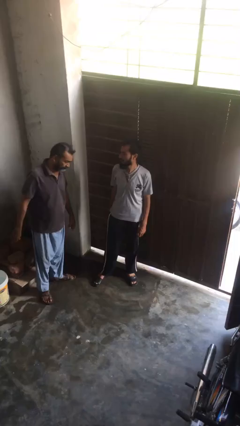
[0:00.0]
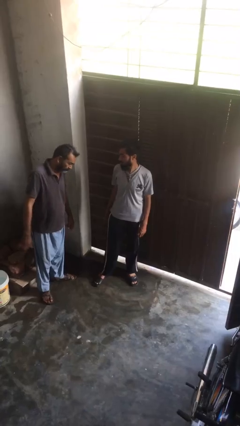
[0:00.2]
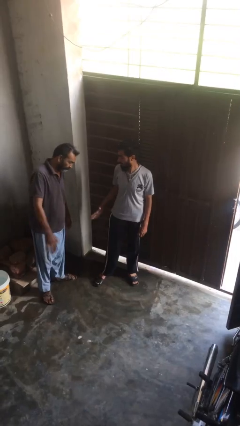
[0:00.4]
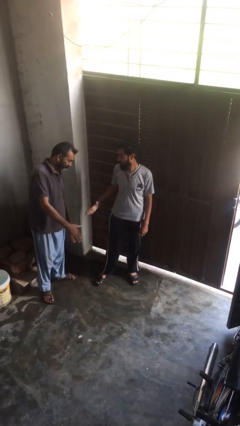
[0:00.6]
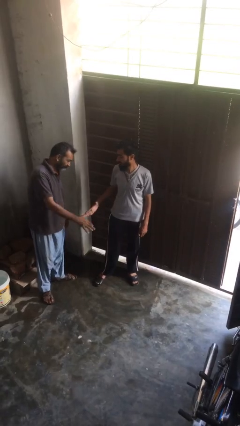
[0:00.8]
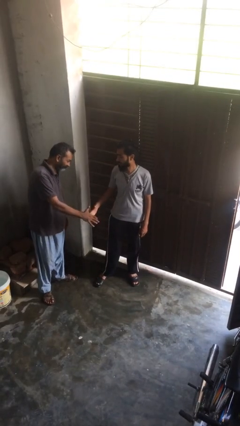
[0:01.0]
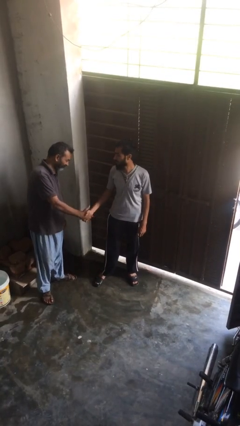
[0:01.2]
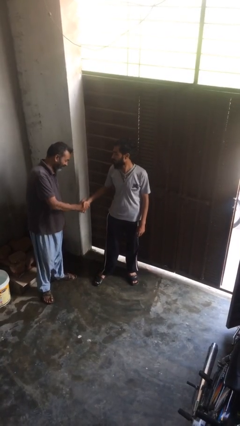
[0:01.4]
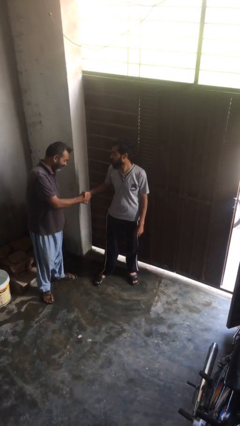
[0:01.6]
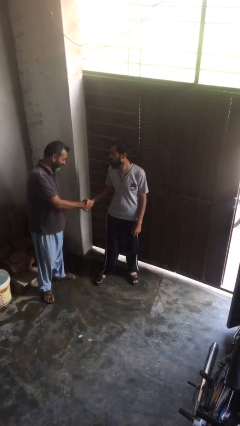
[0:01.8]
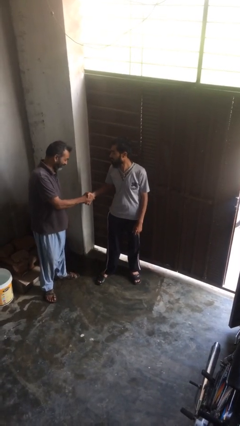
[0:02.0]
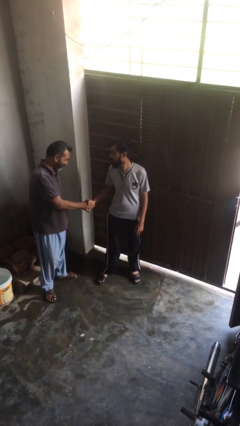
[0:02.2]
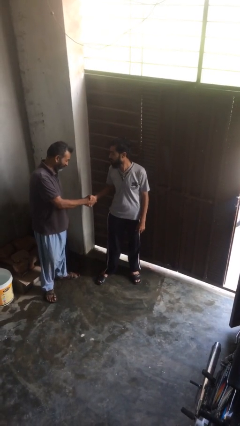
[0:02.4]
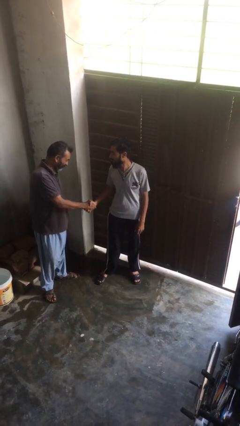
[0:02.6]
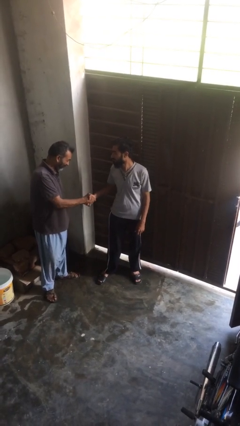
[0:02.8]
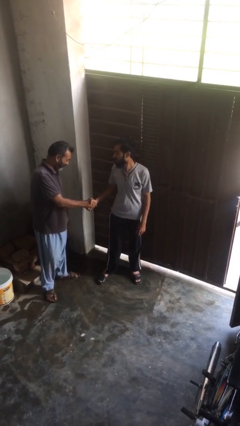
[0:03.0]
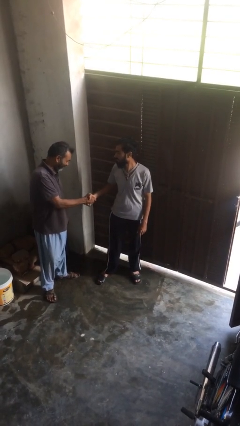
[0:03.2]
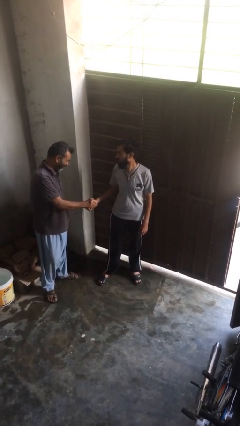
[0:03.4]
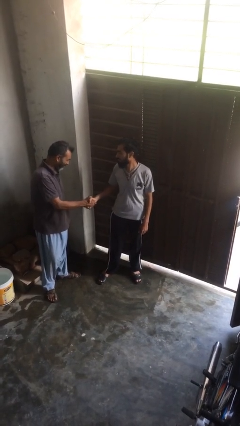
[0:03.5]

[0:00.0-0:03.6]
person shakes hand

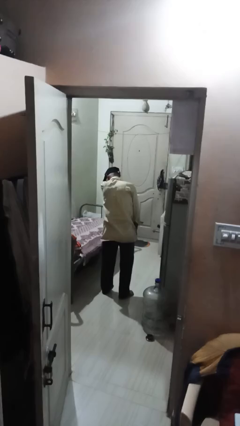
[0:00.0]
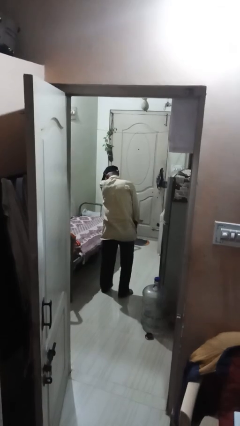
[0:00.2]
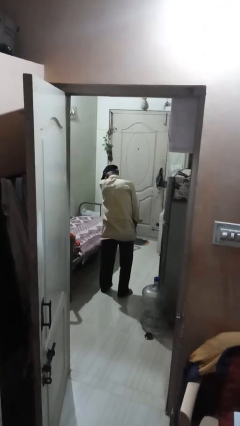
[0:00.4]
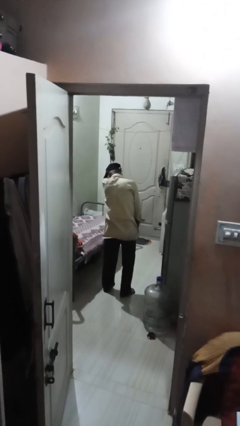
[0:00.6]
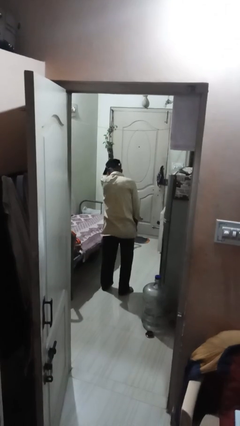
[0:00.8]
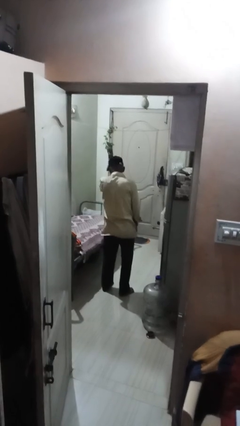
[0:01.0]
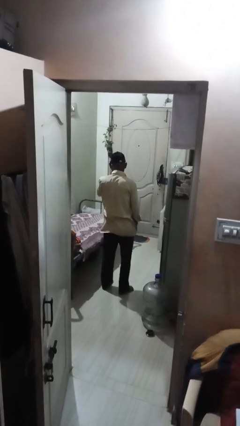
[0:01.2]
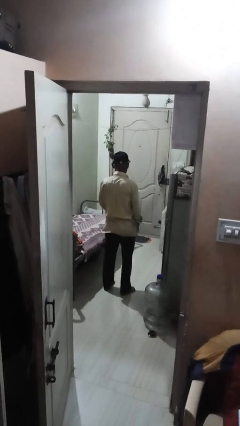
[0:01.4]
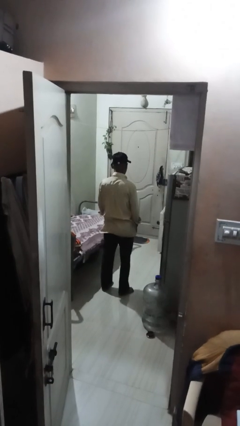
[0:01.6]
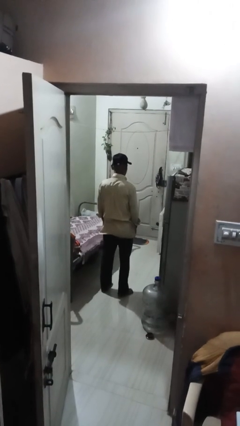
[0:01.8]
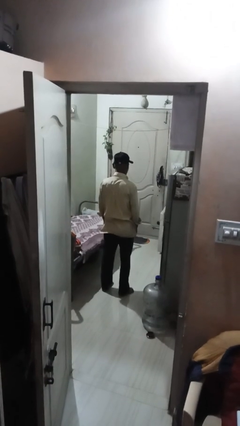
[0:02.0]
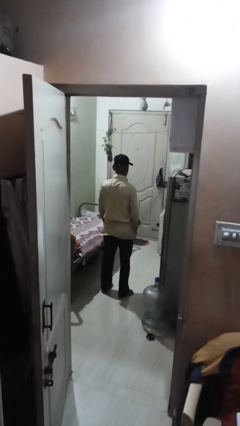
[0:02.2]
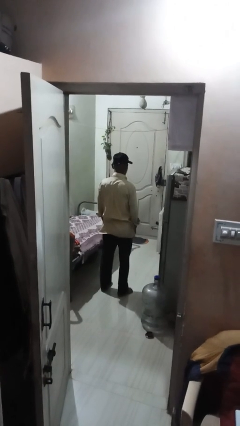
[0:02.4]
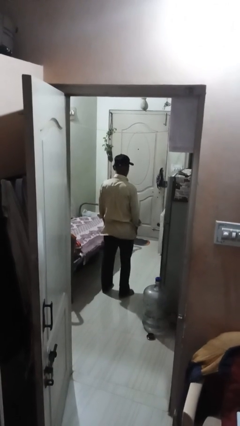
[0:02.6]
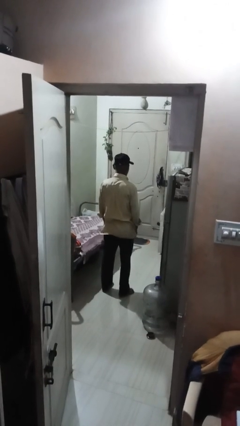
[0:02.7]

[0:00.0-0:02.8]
person shrugs

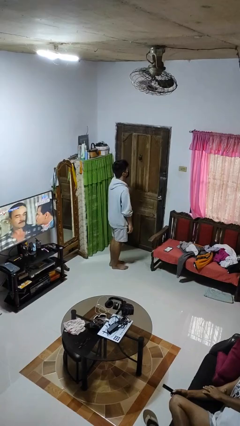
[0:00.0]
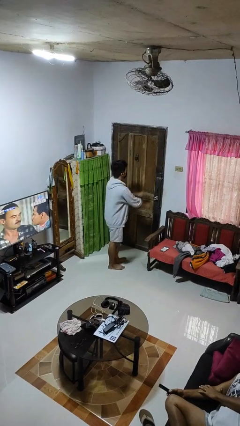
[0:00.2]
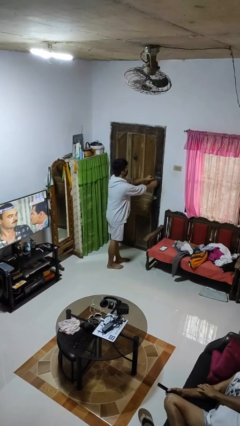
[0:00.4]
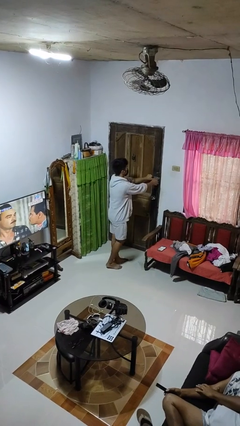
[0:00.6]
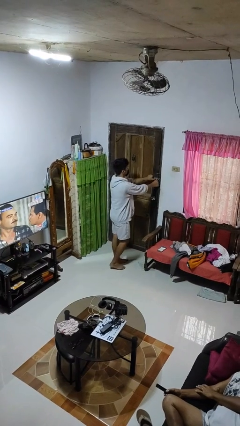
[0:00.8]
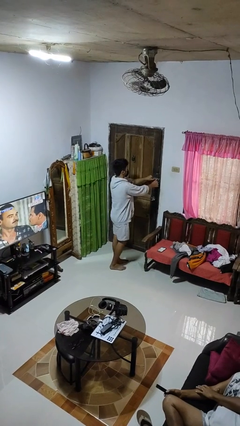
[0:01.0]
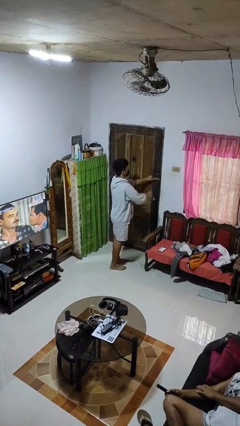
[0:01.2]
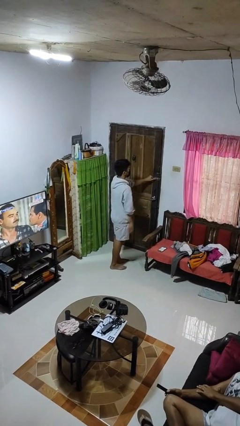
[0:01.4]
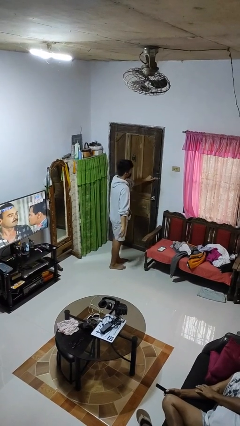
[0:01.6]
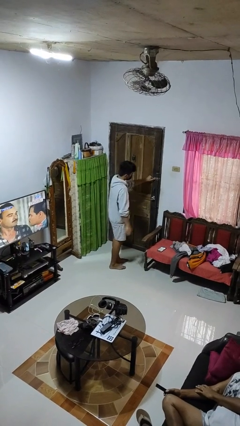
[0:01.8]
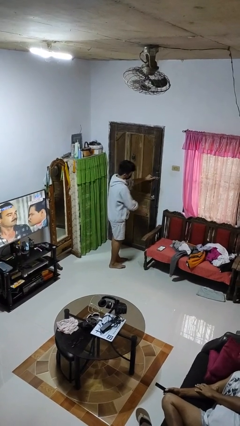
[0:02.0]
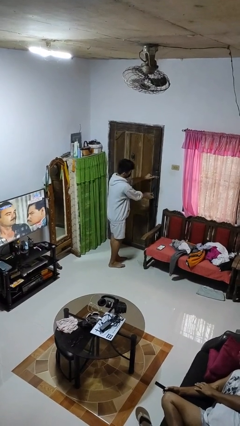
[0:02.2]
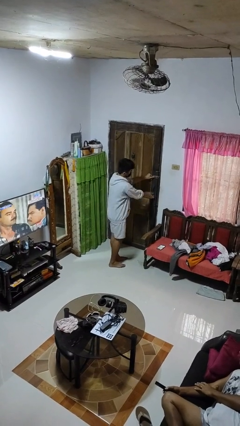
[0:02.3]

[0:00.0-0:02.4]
person unlocks door with keys

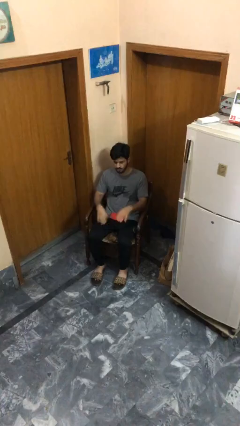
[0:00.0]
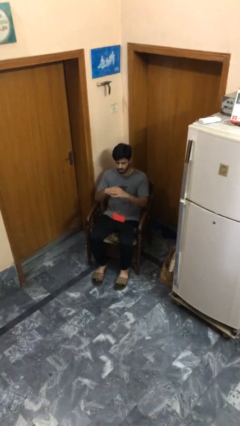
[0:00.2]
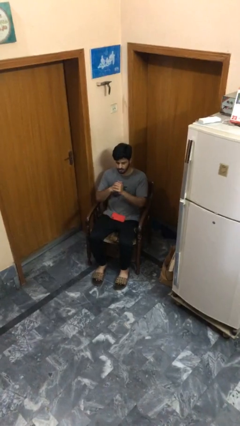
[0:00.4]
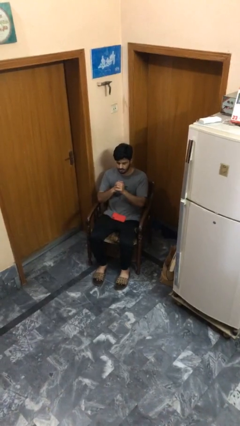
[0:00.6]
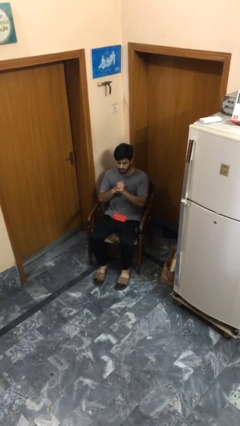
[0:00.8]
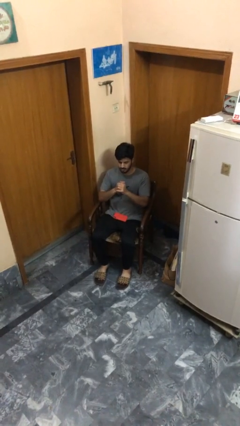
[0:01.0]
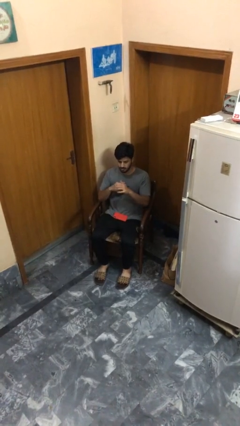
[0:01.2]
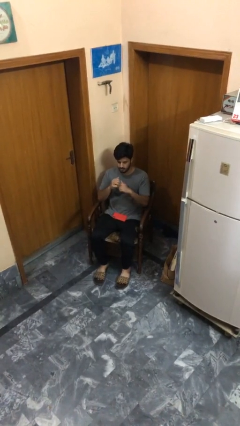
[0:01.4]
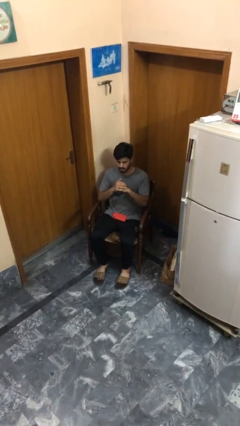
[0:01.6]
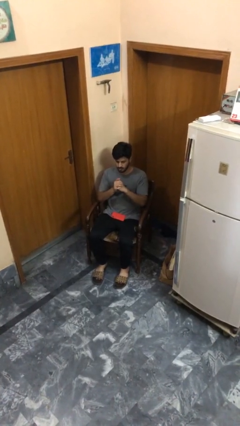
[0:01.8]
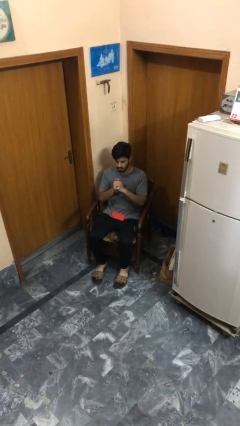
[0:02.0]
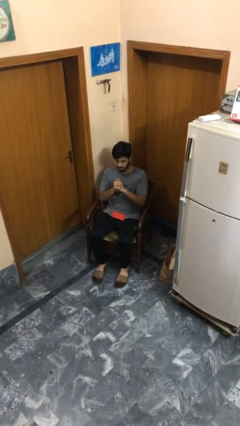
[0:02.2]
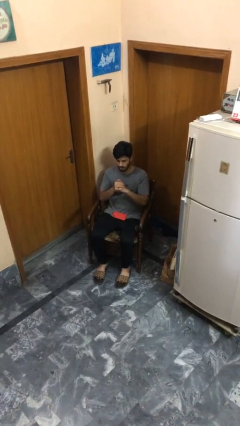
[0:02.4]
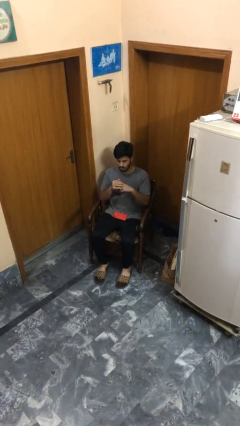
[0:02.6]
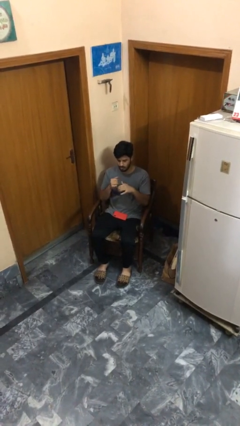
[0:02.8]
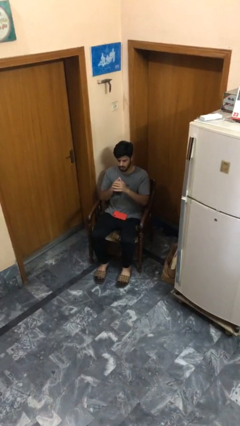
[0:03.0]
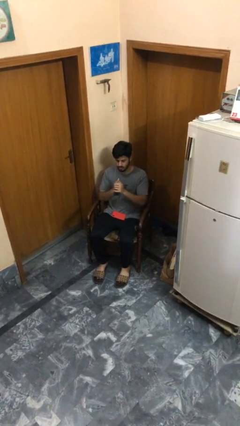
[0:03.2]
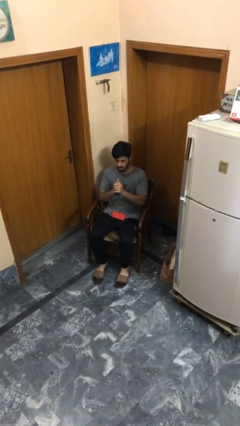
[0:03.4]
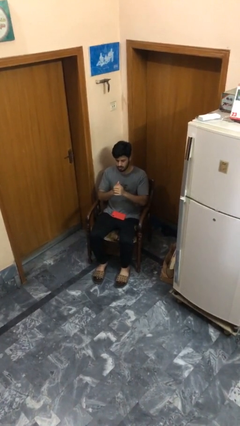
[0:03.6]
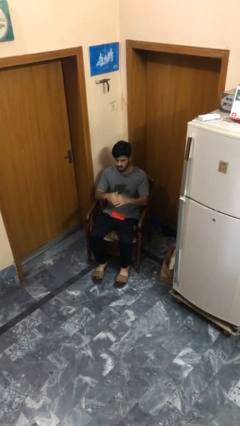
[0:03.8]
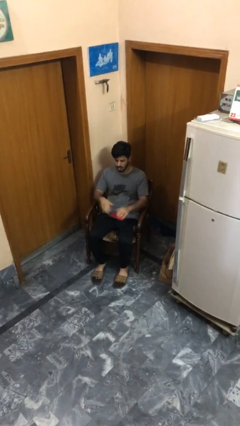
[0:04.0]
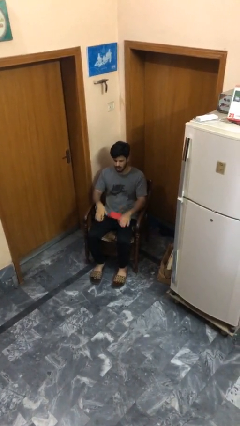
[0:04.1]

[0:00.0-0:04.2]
person cracks knuckles

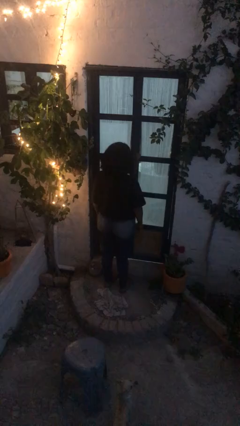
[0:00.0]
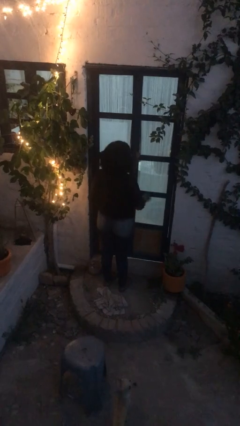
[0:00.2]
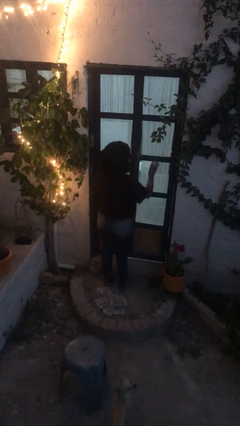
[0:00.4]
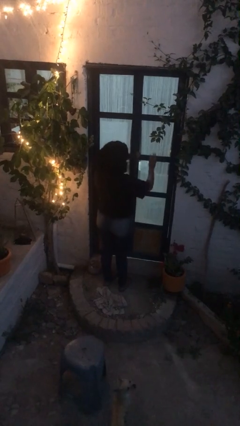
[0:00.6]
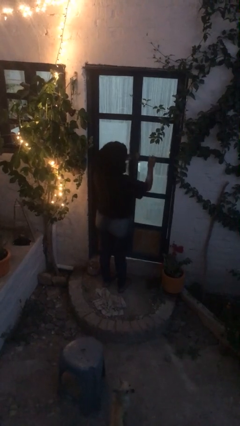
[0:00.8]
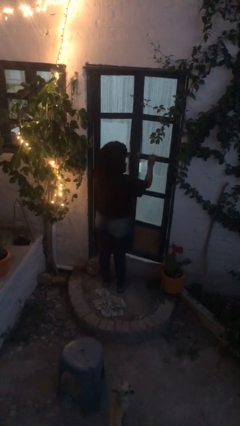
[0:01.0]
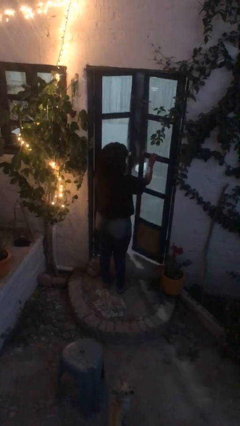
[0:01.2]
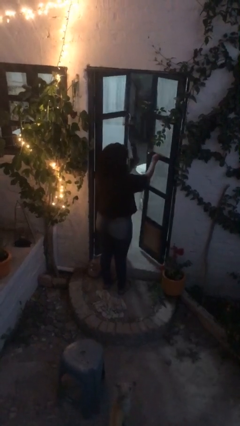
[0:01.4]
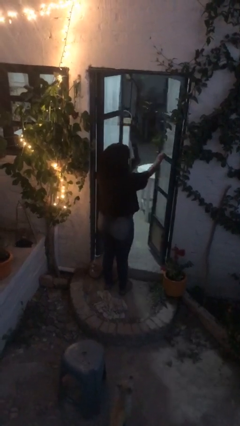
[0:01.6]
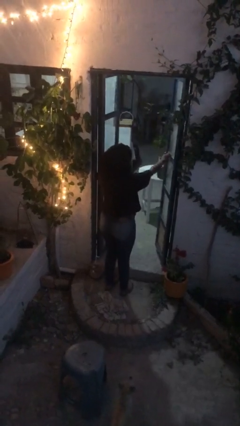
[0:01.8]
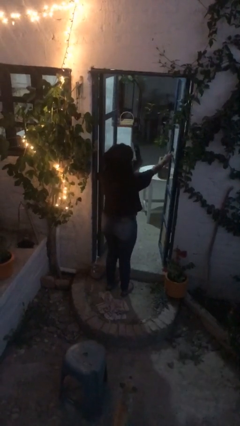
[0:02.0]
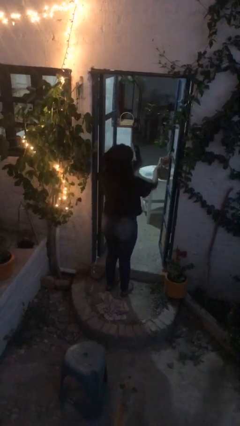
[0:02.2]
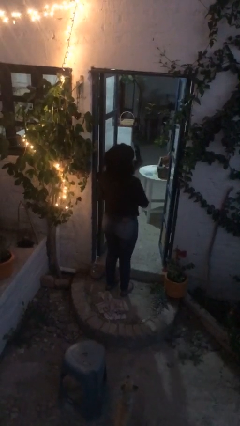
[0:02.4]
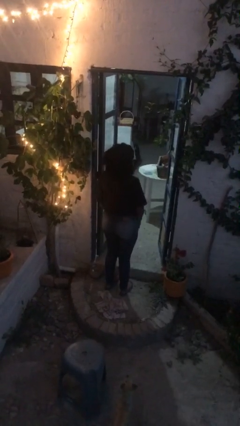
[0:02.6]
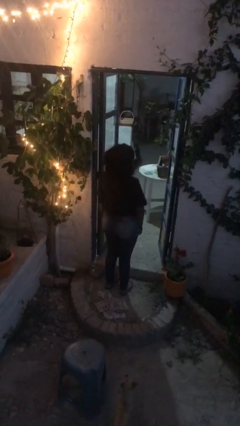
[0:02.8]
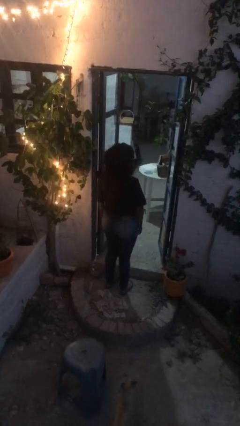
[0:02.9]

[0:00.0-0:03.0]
person opens facility door

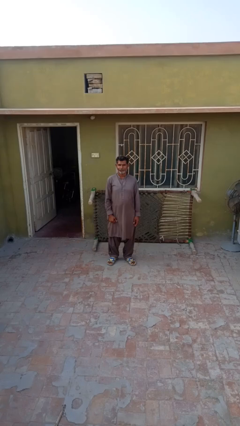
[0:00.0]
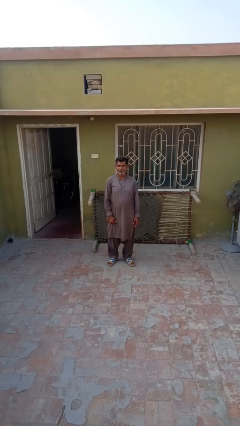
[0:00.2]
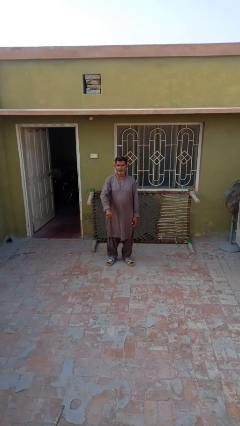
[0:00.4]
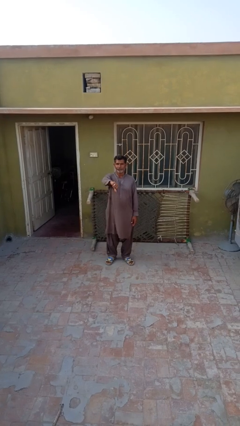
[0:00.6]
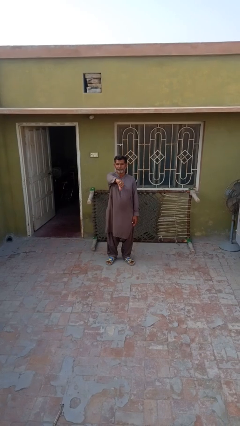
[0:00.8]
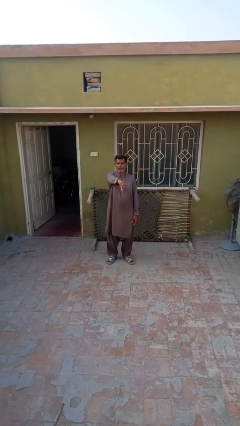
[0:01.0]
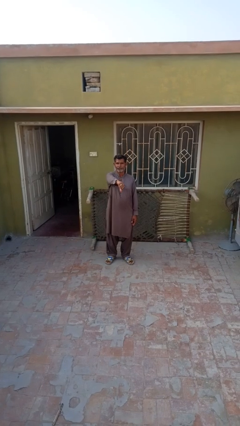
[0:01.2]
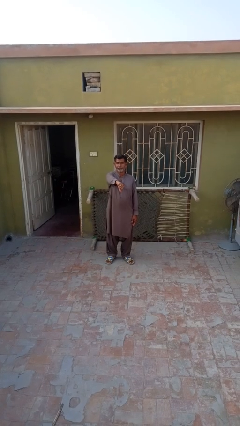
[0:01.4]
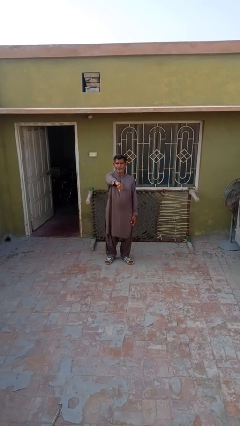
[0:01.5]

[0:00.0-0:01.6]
person gestures thumbs down
